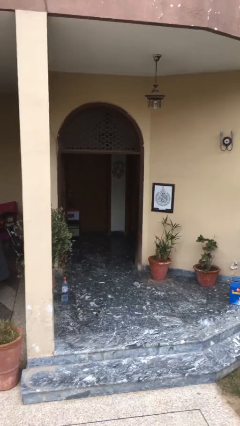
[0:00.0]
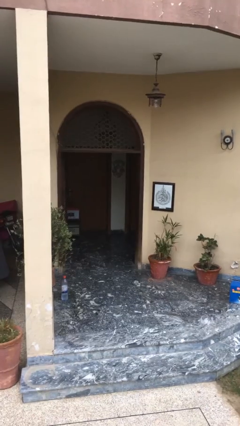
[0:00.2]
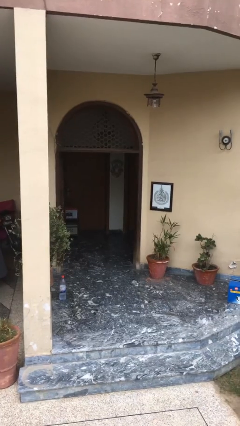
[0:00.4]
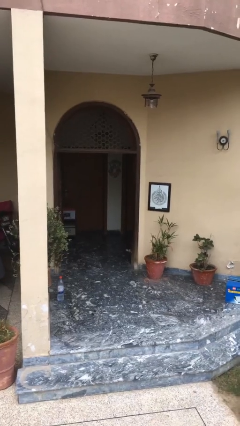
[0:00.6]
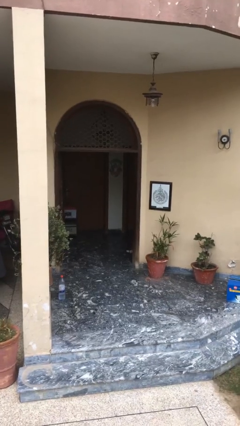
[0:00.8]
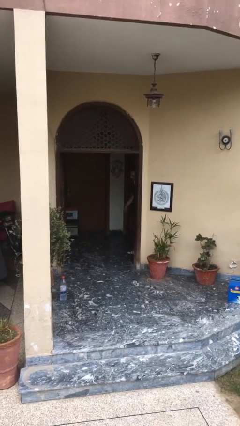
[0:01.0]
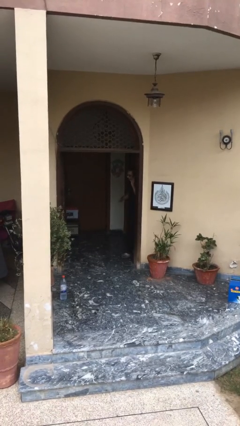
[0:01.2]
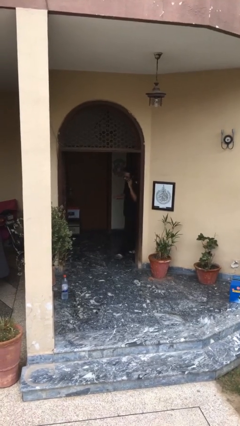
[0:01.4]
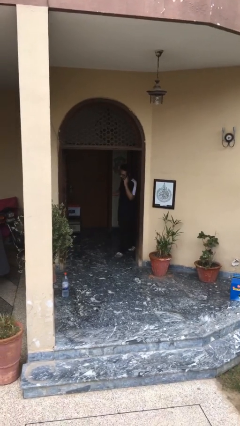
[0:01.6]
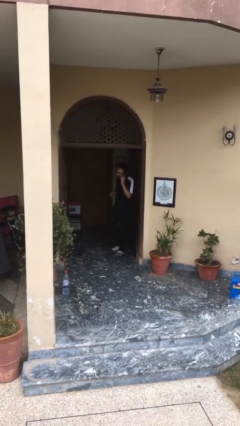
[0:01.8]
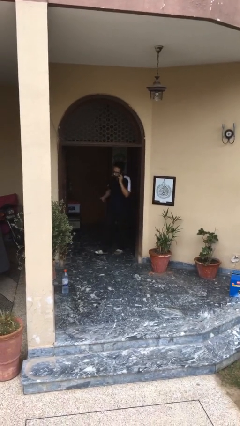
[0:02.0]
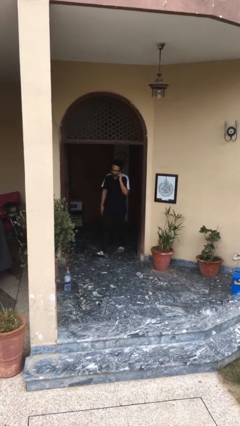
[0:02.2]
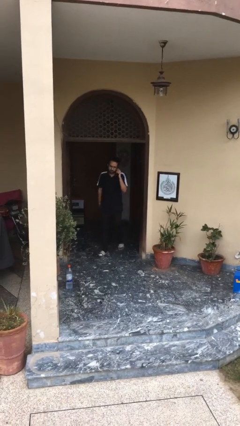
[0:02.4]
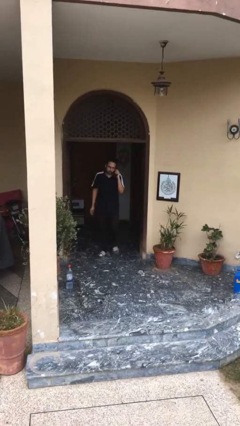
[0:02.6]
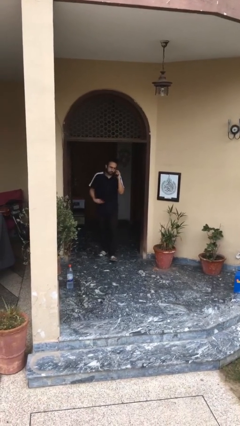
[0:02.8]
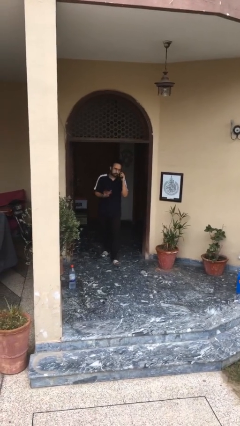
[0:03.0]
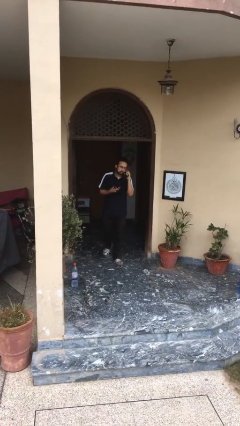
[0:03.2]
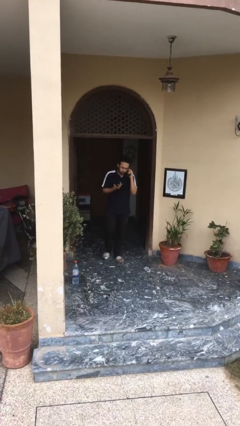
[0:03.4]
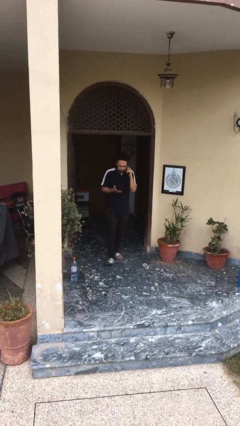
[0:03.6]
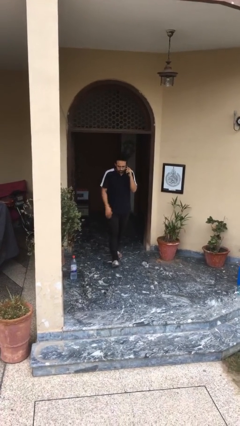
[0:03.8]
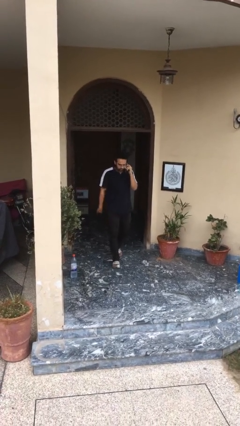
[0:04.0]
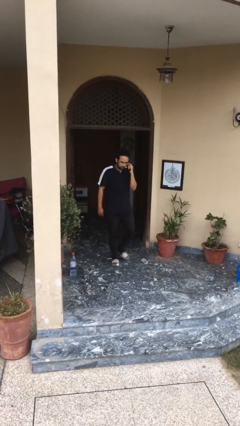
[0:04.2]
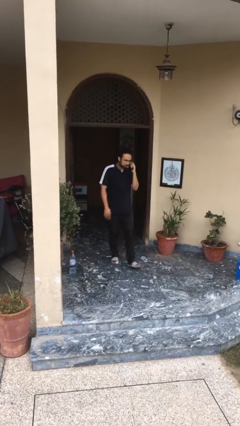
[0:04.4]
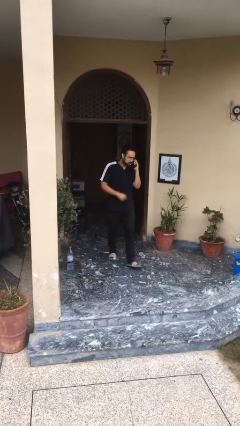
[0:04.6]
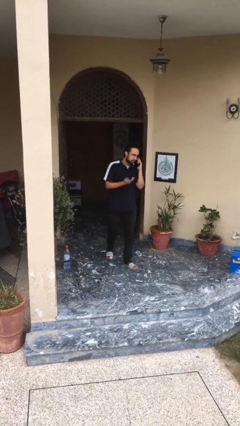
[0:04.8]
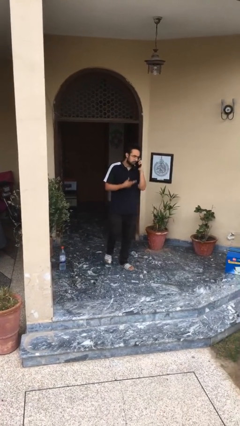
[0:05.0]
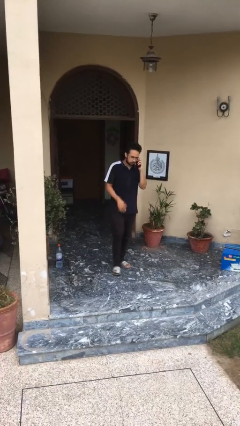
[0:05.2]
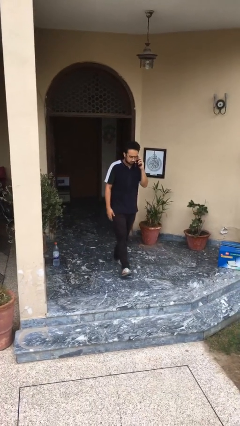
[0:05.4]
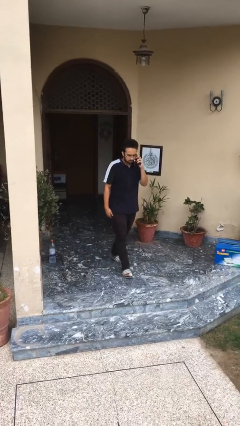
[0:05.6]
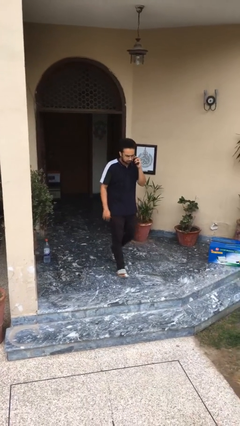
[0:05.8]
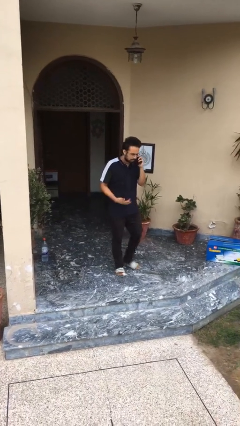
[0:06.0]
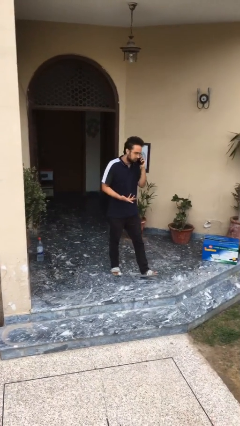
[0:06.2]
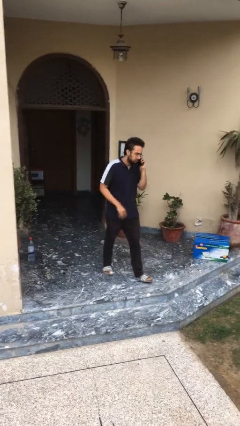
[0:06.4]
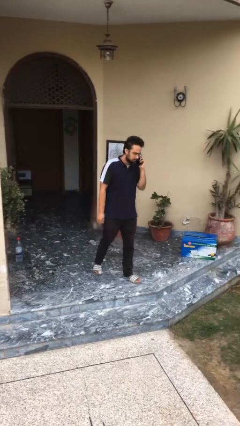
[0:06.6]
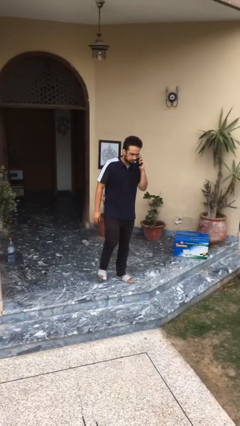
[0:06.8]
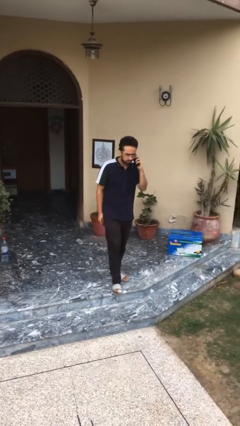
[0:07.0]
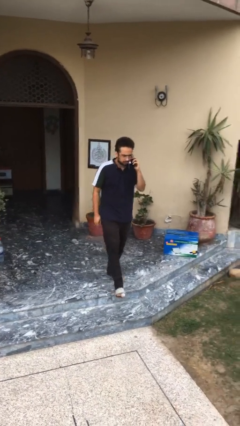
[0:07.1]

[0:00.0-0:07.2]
person enters scene through structure

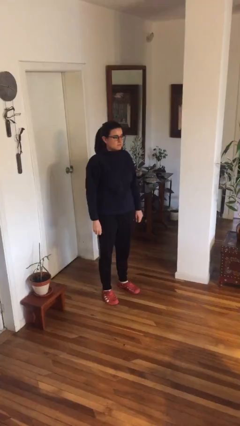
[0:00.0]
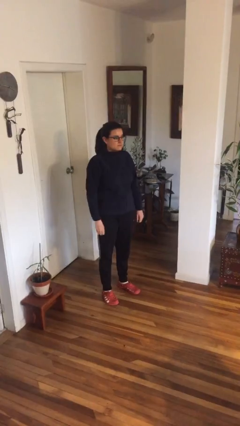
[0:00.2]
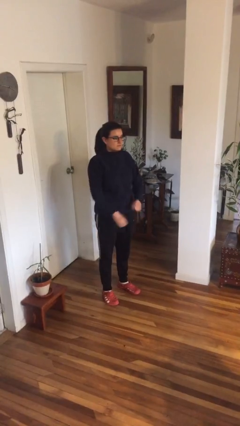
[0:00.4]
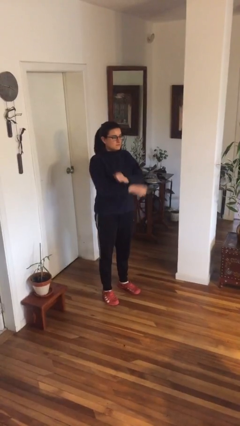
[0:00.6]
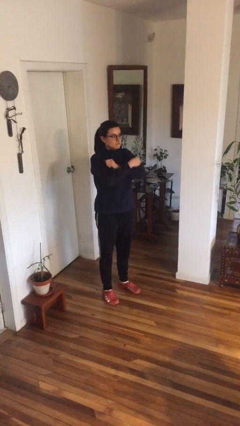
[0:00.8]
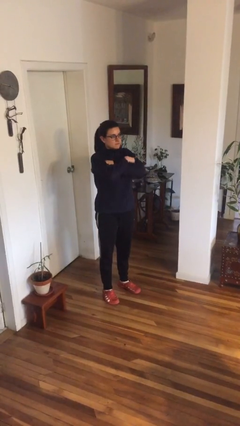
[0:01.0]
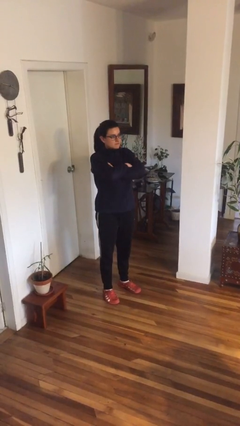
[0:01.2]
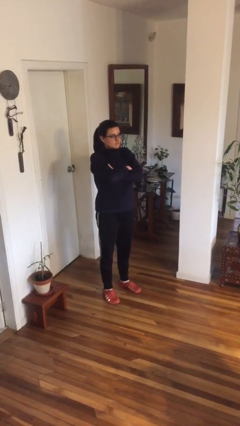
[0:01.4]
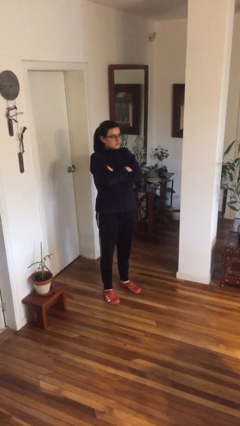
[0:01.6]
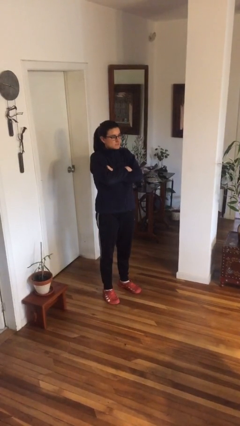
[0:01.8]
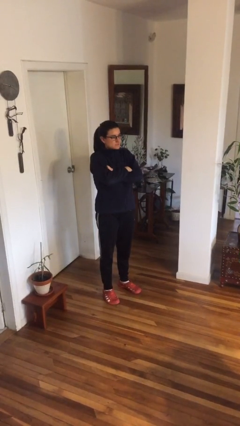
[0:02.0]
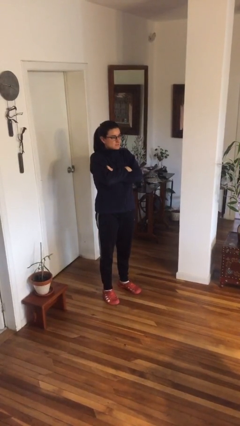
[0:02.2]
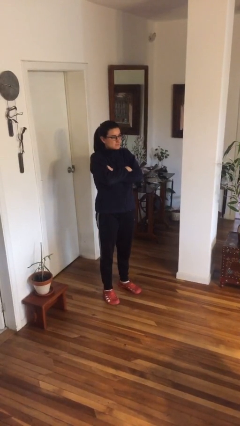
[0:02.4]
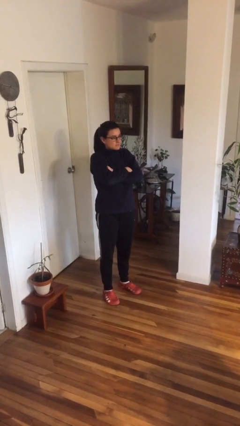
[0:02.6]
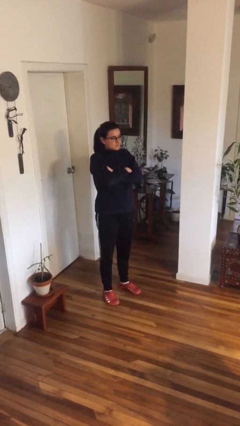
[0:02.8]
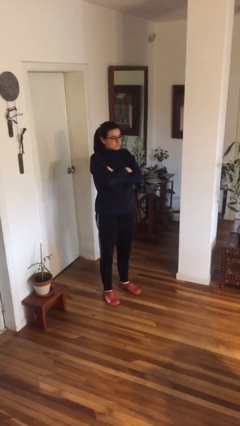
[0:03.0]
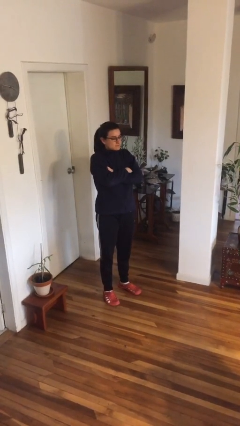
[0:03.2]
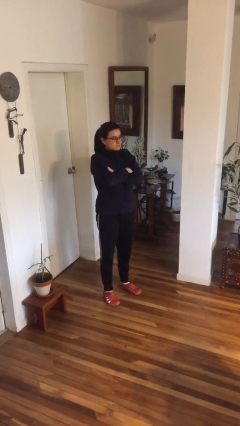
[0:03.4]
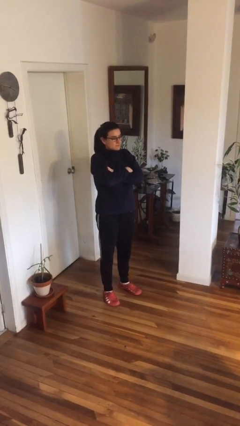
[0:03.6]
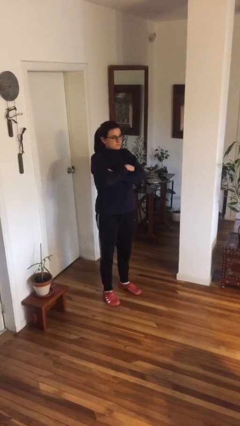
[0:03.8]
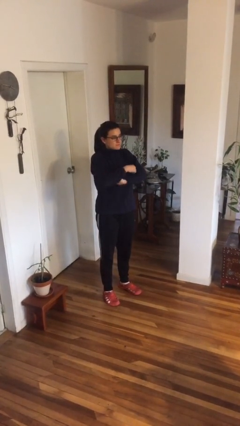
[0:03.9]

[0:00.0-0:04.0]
person crosses arms

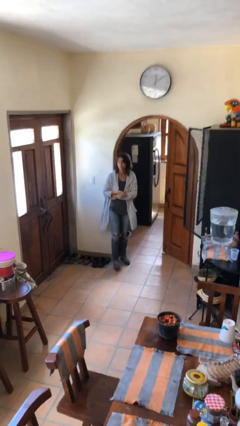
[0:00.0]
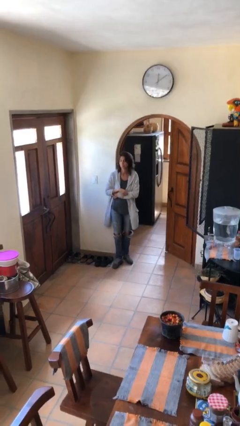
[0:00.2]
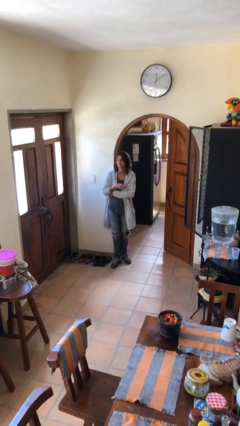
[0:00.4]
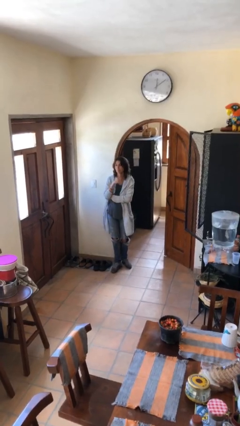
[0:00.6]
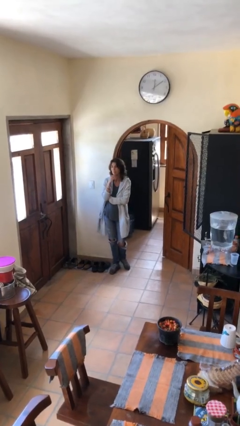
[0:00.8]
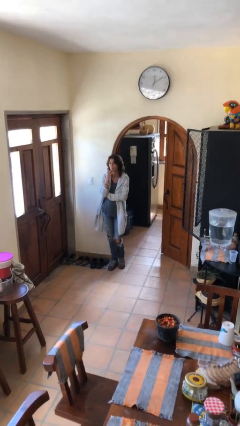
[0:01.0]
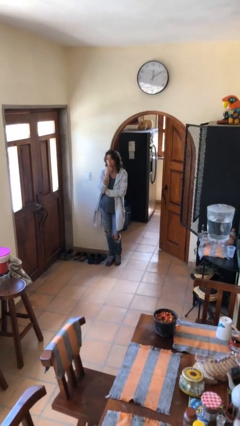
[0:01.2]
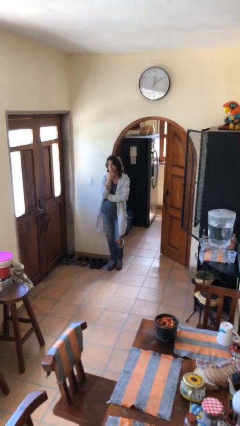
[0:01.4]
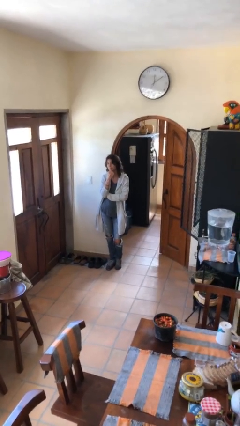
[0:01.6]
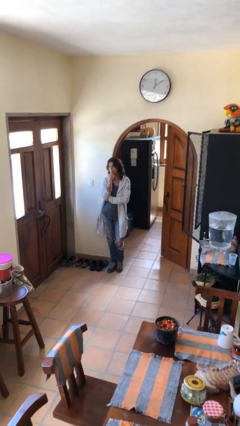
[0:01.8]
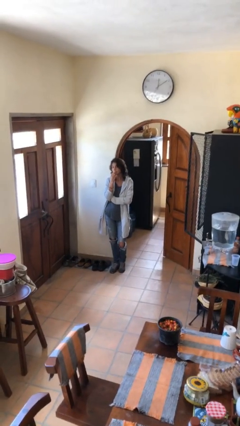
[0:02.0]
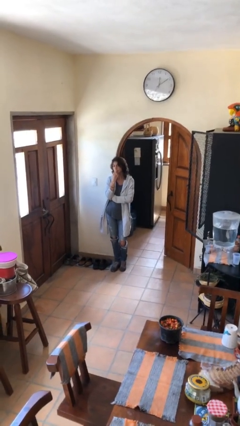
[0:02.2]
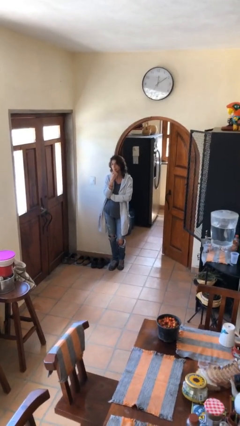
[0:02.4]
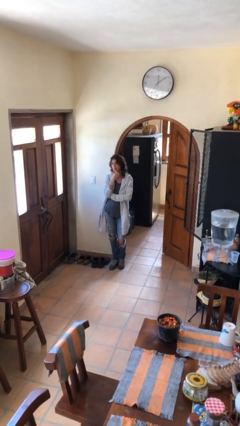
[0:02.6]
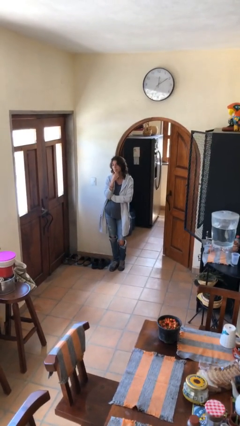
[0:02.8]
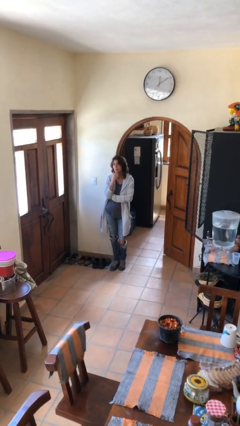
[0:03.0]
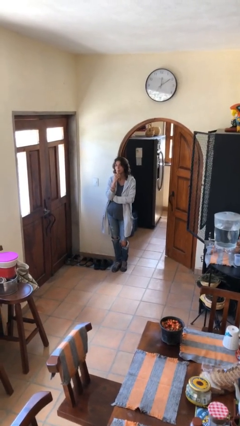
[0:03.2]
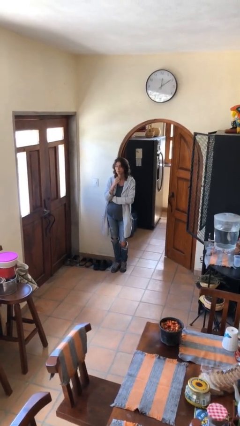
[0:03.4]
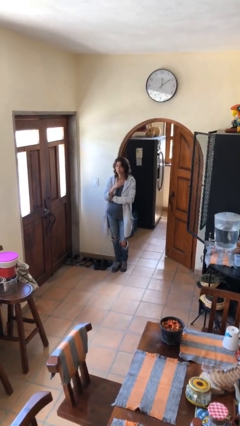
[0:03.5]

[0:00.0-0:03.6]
person strokes chin

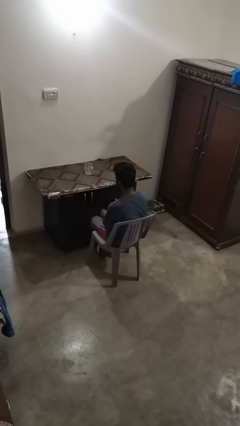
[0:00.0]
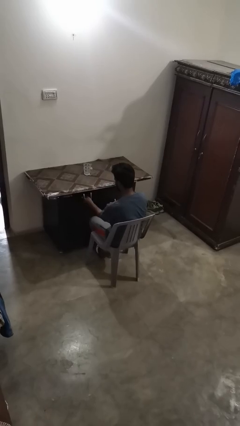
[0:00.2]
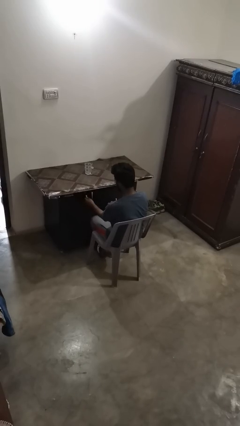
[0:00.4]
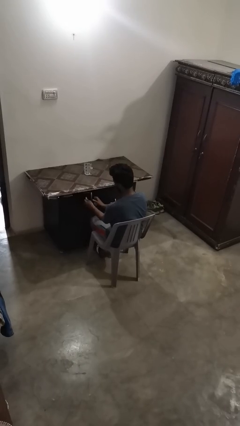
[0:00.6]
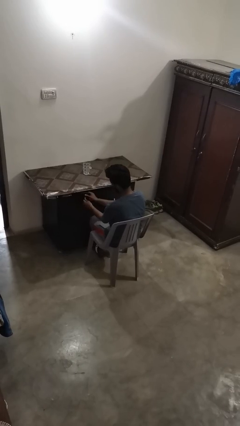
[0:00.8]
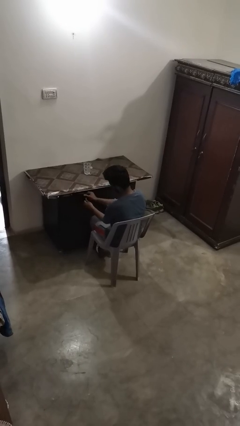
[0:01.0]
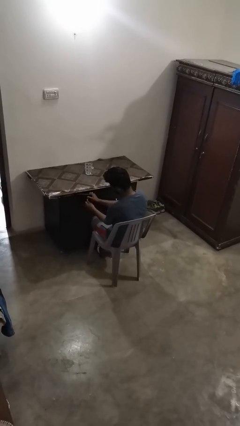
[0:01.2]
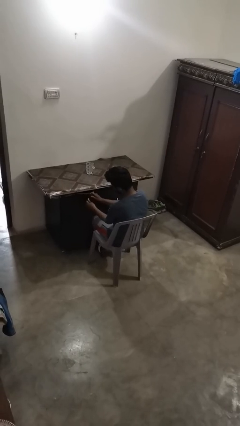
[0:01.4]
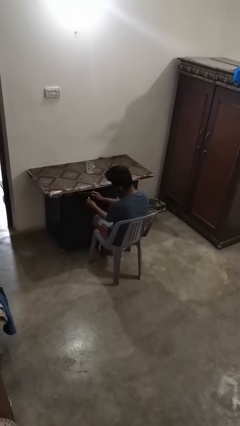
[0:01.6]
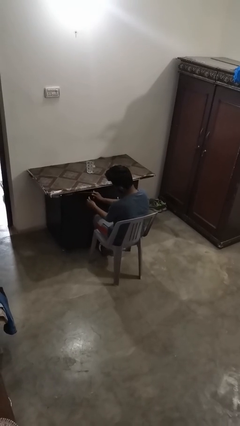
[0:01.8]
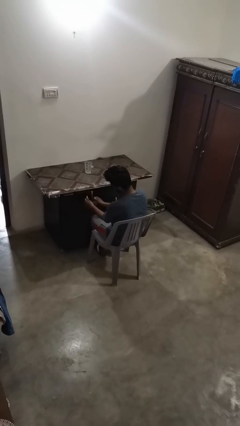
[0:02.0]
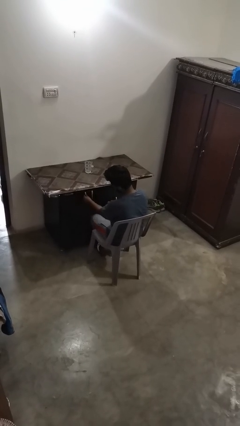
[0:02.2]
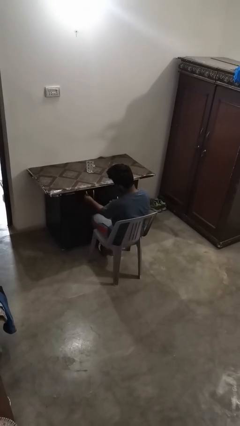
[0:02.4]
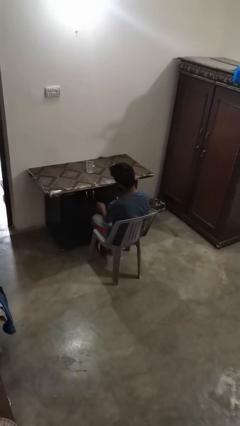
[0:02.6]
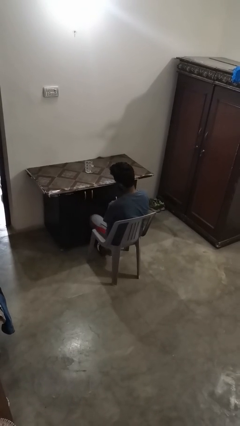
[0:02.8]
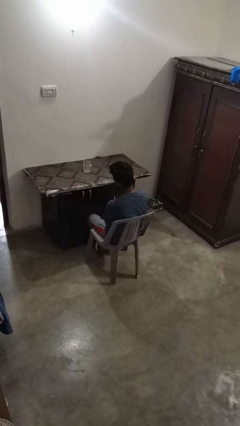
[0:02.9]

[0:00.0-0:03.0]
person sets upright furniture
